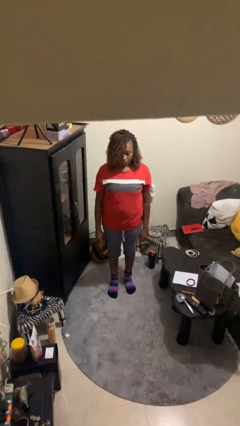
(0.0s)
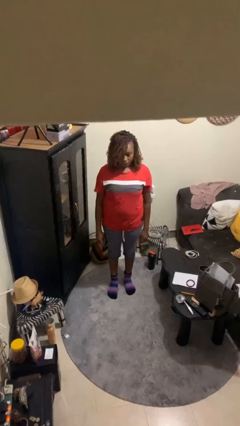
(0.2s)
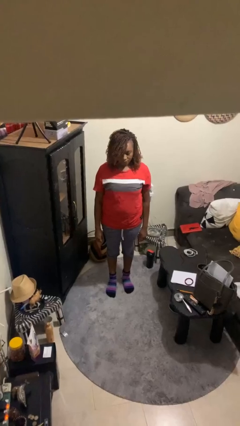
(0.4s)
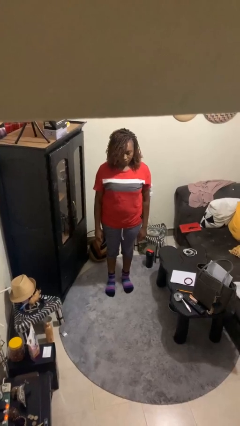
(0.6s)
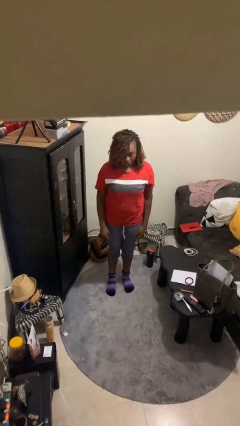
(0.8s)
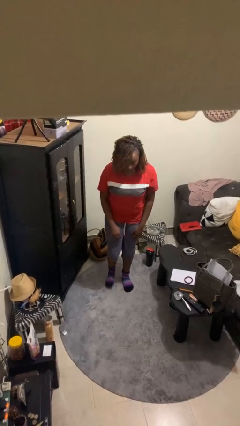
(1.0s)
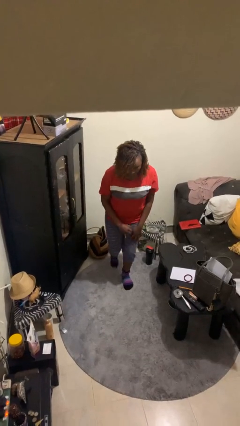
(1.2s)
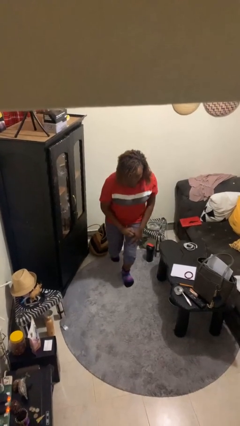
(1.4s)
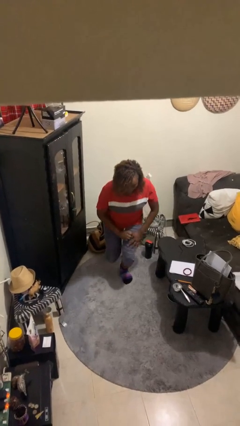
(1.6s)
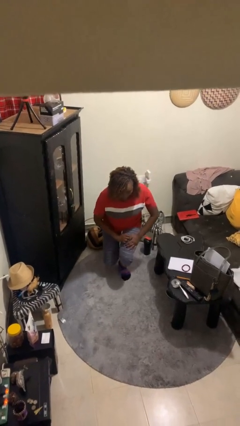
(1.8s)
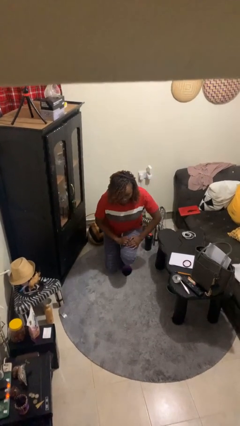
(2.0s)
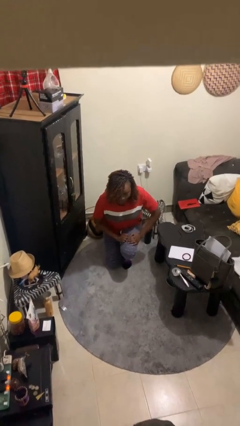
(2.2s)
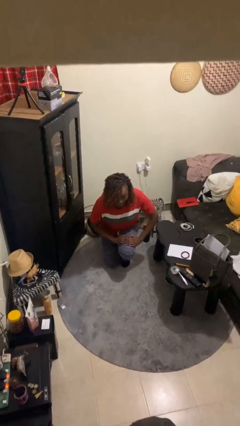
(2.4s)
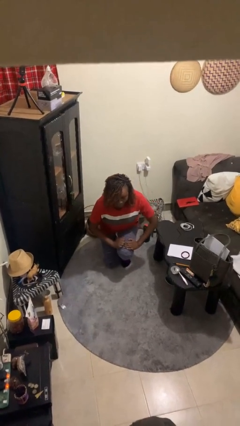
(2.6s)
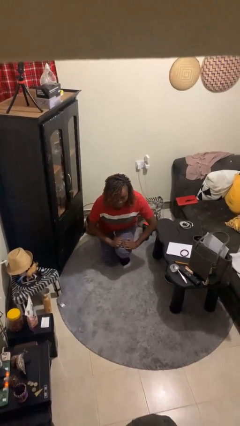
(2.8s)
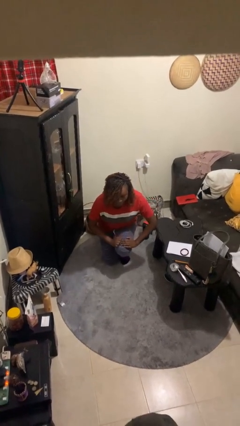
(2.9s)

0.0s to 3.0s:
person kneels

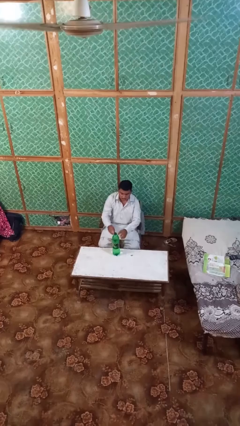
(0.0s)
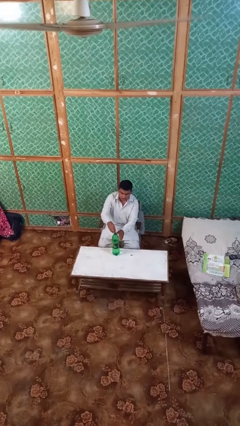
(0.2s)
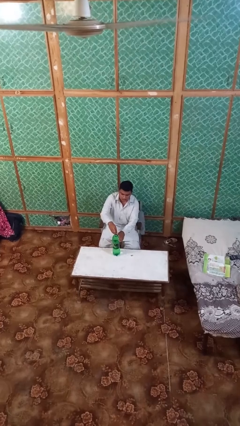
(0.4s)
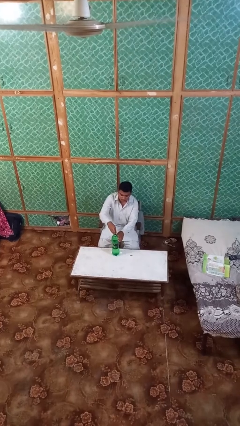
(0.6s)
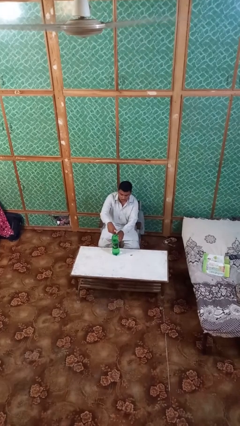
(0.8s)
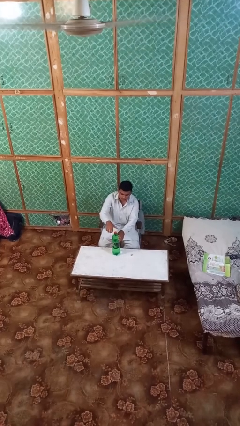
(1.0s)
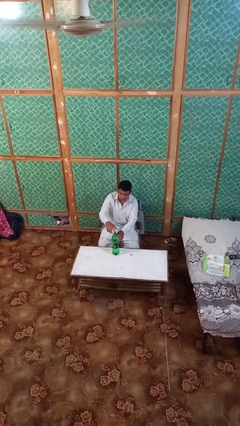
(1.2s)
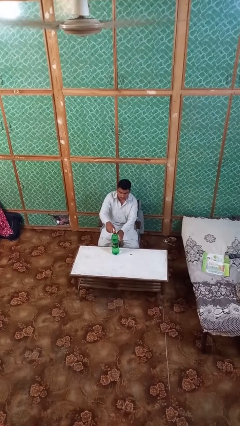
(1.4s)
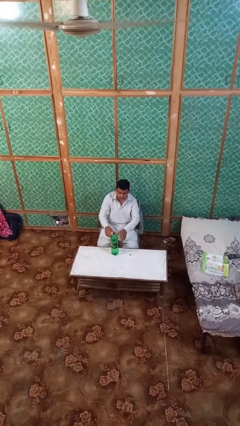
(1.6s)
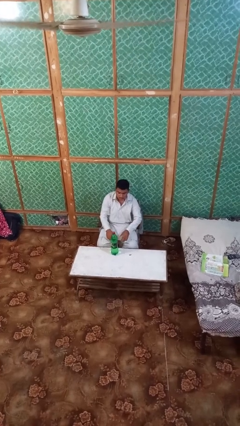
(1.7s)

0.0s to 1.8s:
person screws lid to bottle

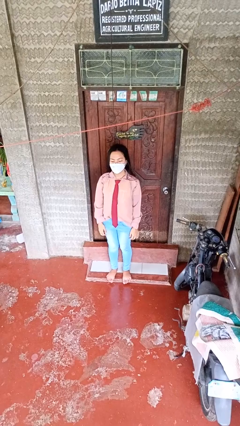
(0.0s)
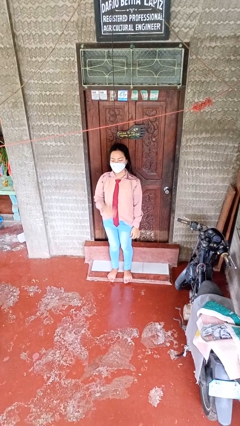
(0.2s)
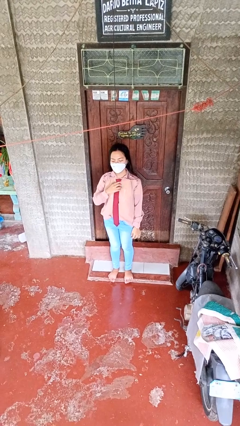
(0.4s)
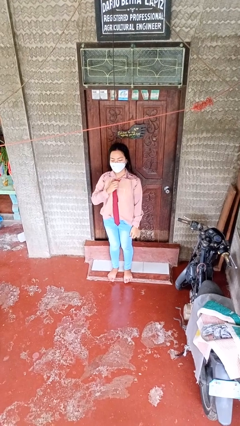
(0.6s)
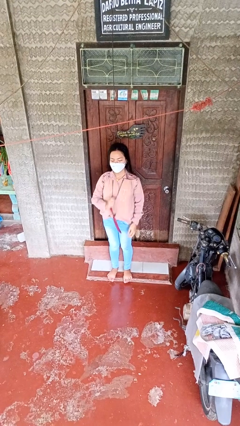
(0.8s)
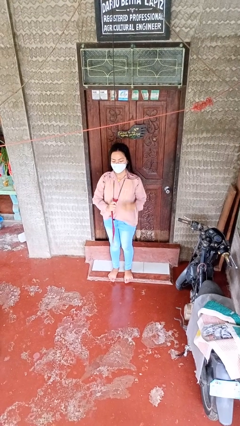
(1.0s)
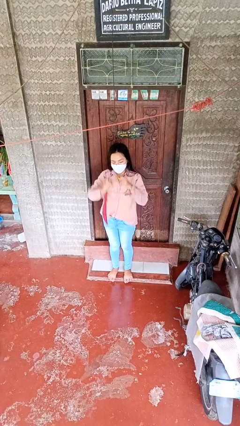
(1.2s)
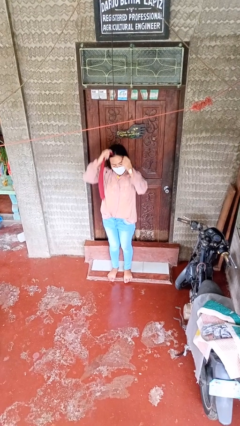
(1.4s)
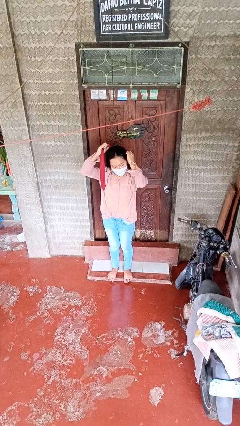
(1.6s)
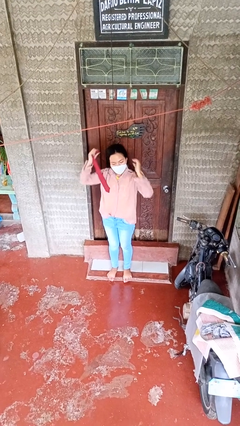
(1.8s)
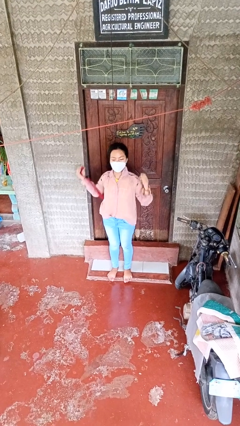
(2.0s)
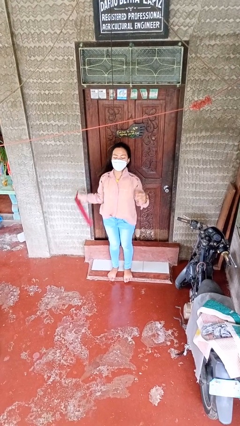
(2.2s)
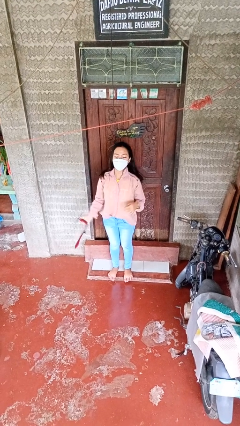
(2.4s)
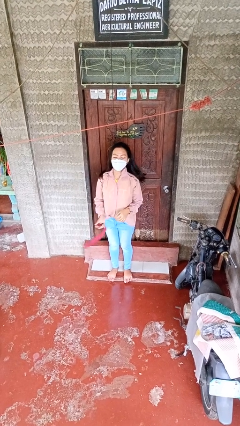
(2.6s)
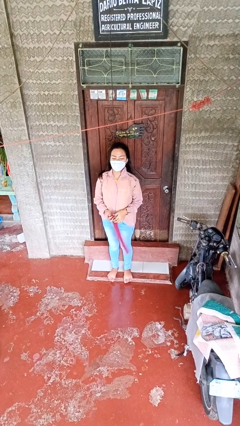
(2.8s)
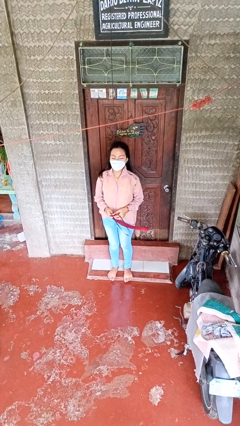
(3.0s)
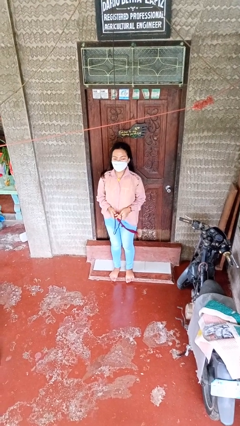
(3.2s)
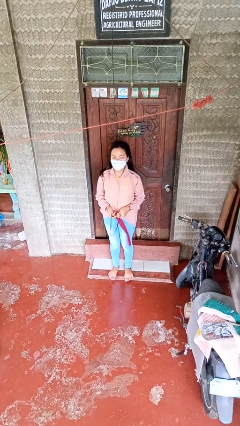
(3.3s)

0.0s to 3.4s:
person takes off necktie

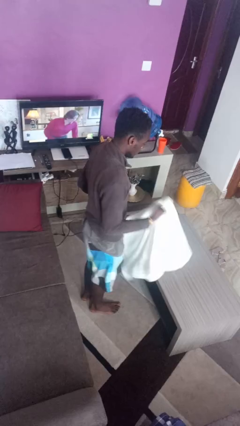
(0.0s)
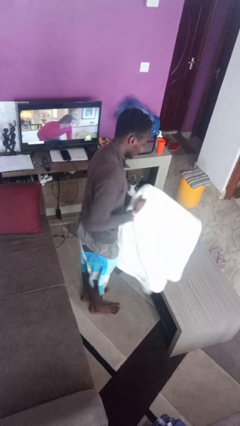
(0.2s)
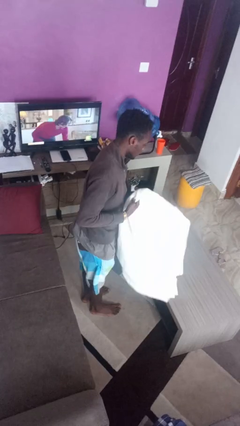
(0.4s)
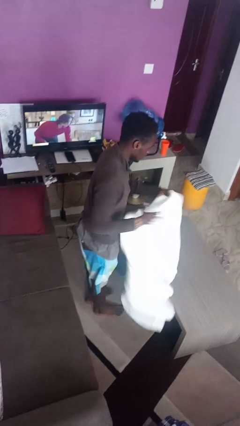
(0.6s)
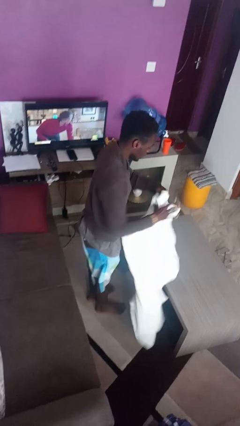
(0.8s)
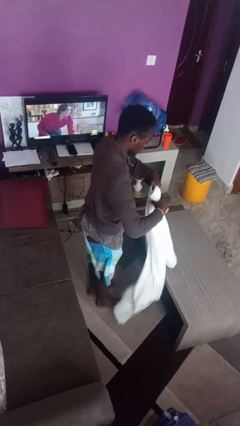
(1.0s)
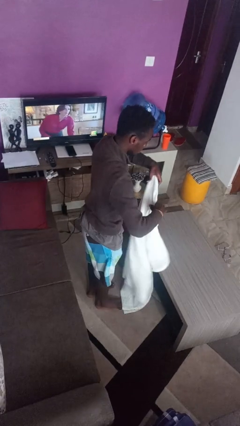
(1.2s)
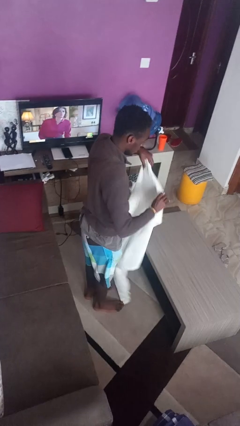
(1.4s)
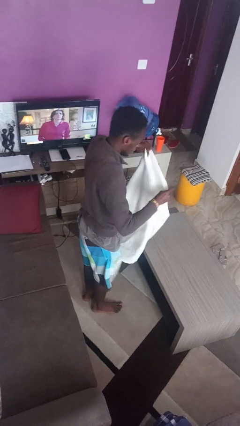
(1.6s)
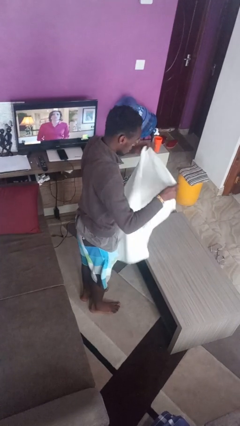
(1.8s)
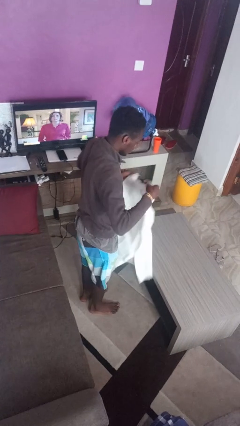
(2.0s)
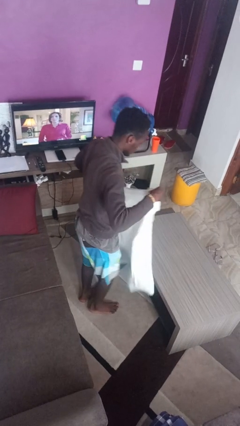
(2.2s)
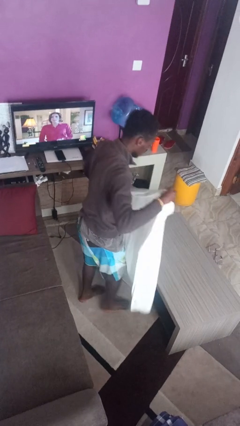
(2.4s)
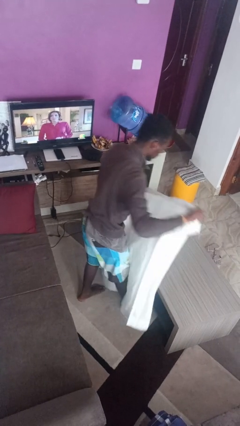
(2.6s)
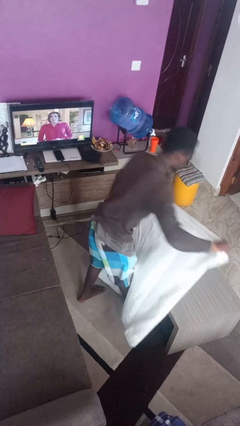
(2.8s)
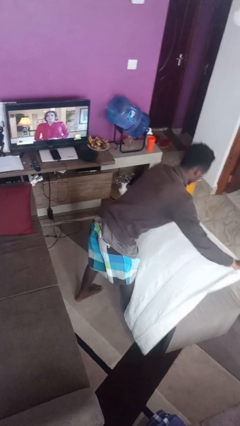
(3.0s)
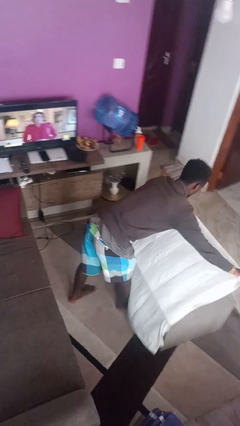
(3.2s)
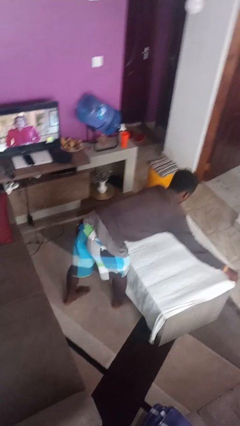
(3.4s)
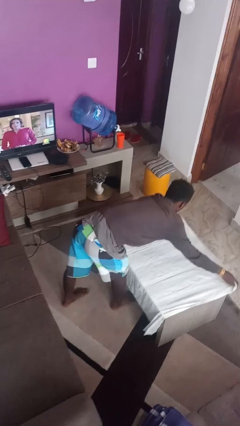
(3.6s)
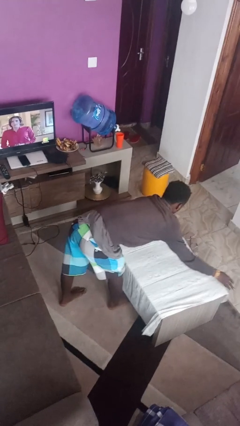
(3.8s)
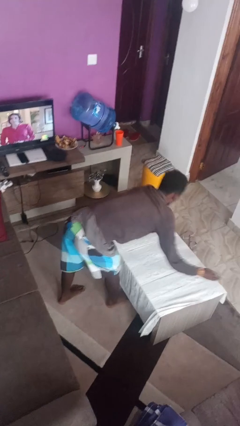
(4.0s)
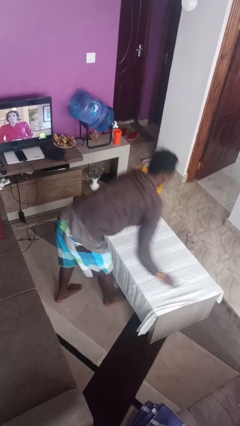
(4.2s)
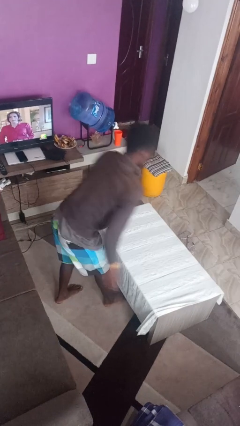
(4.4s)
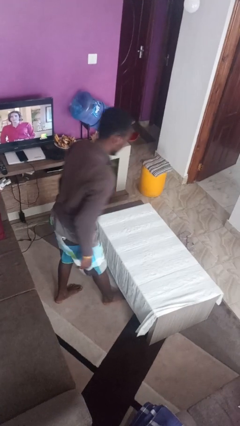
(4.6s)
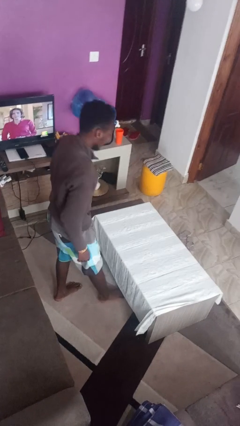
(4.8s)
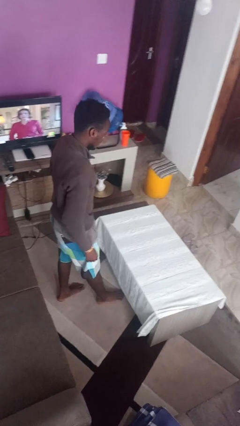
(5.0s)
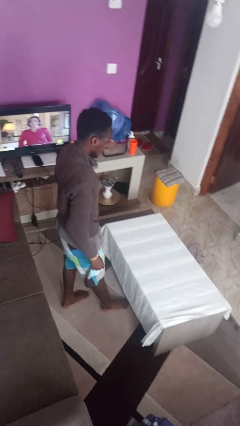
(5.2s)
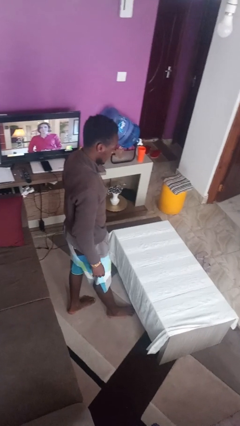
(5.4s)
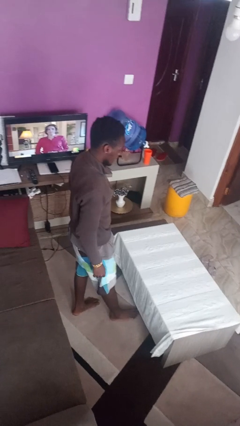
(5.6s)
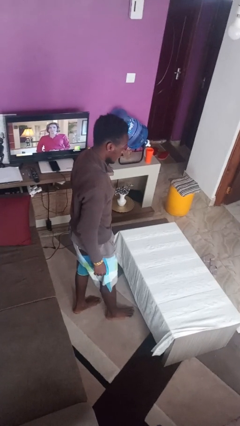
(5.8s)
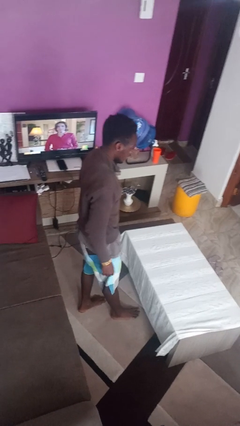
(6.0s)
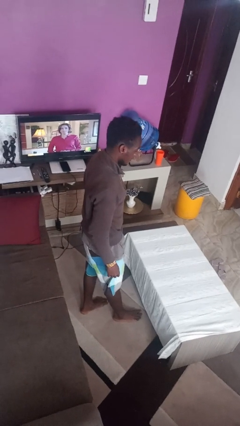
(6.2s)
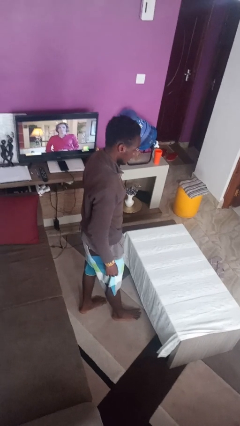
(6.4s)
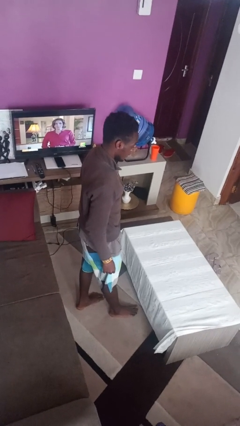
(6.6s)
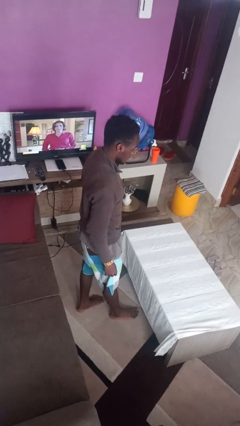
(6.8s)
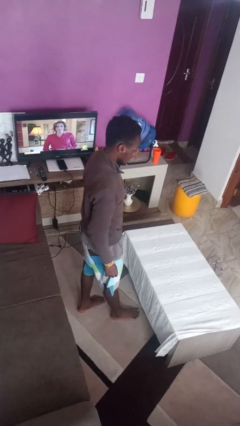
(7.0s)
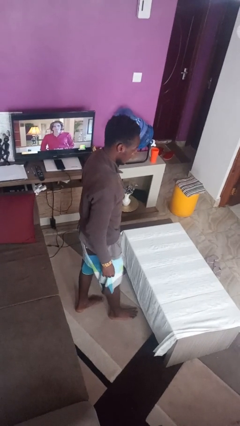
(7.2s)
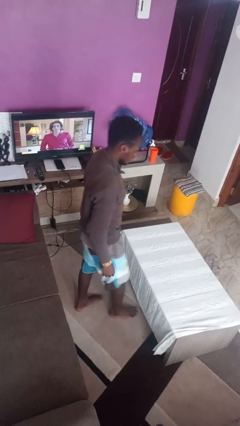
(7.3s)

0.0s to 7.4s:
person spreads tablecloth

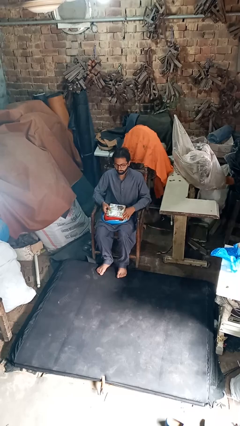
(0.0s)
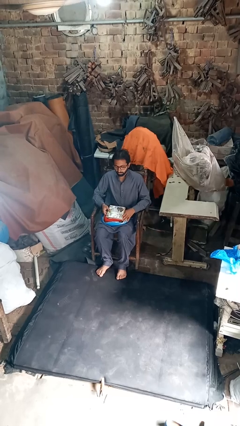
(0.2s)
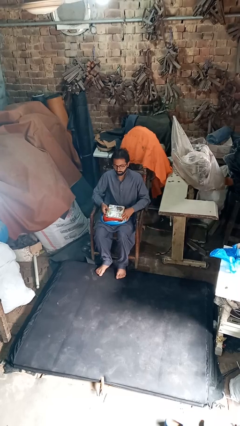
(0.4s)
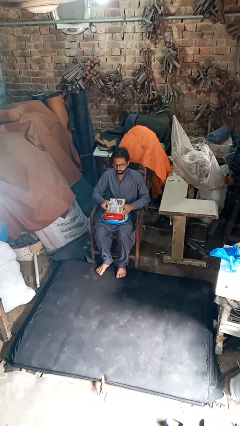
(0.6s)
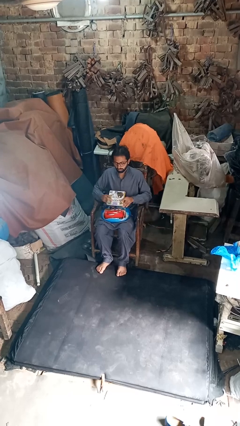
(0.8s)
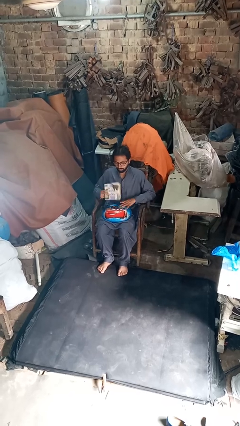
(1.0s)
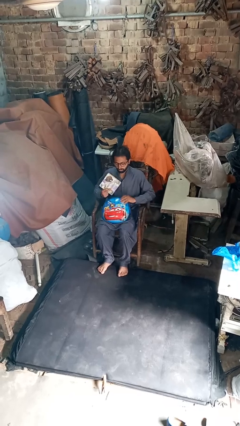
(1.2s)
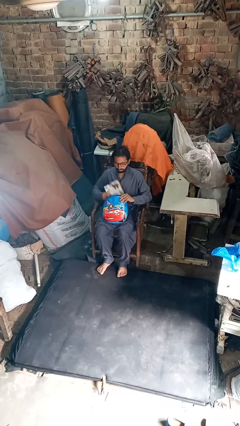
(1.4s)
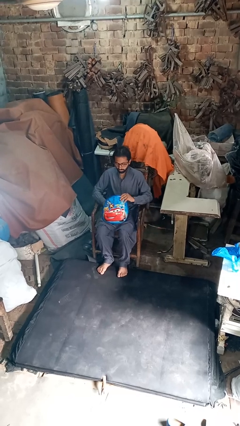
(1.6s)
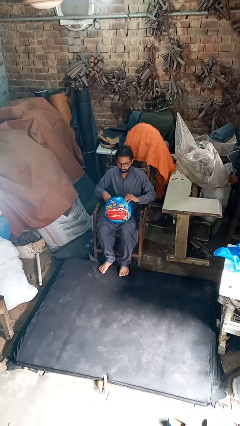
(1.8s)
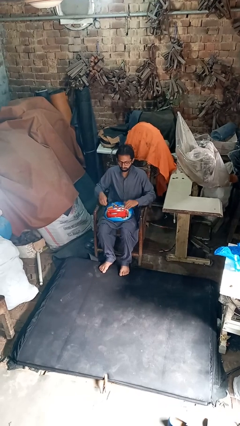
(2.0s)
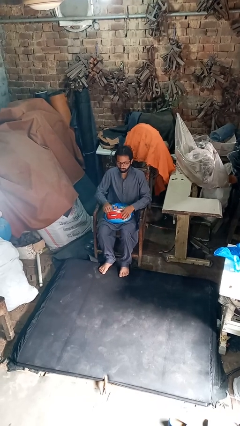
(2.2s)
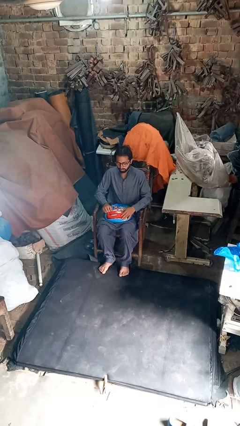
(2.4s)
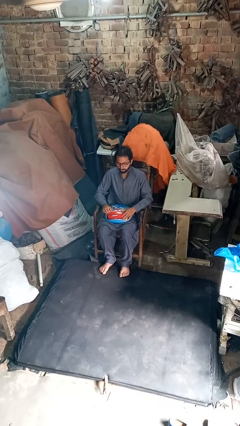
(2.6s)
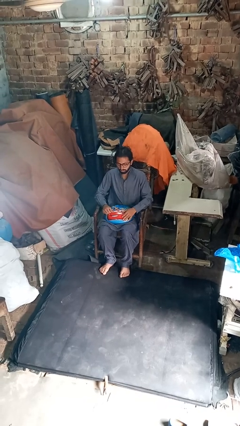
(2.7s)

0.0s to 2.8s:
person puts object into purse
